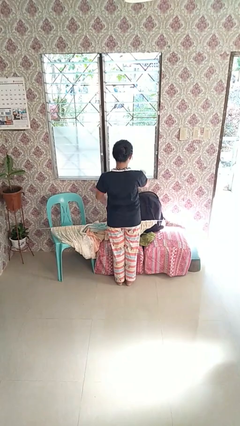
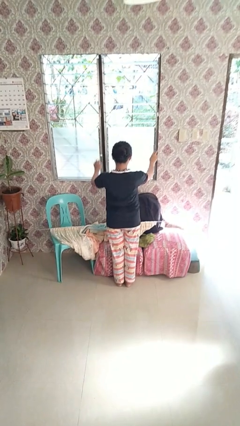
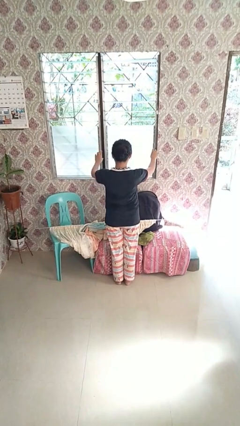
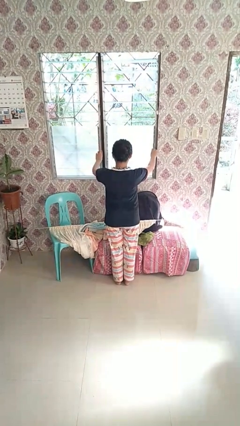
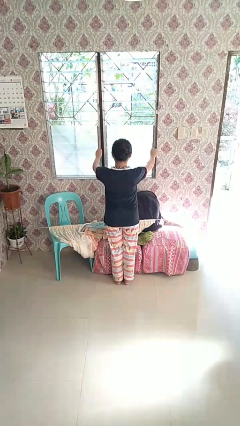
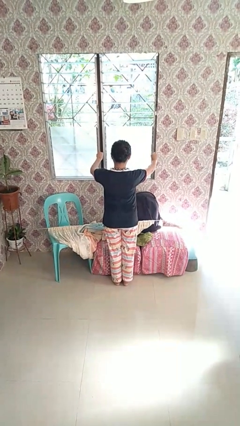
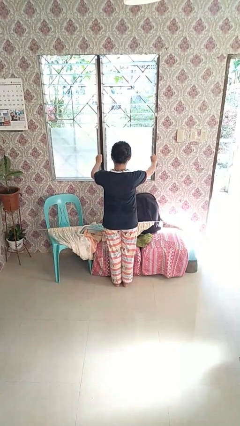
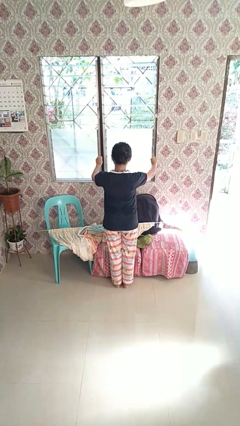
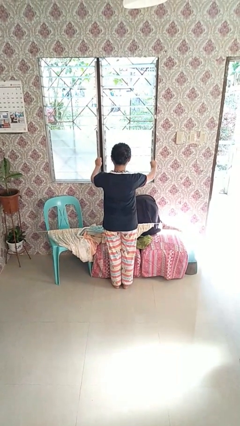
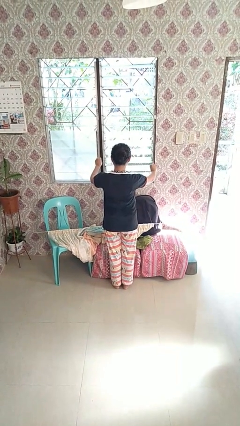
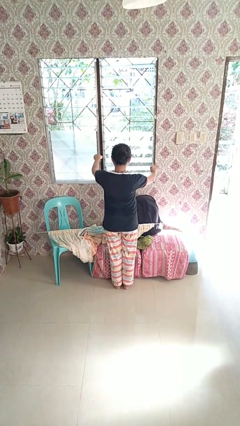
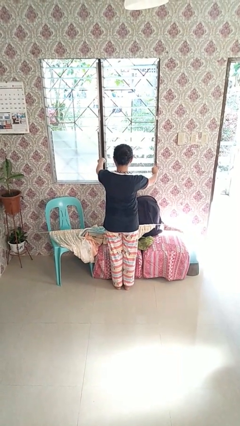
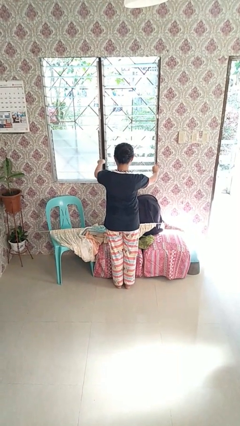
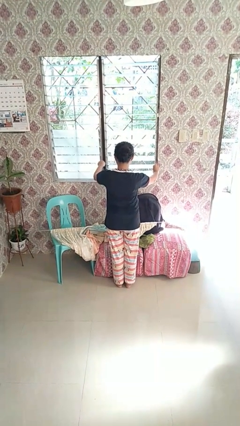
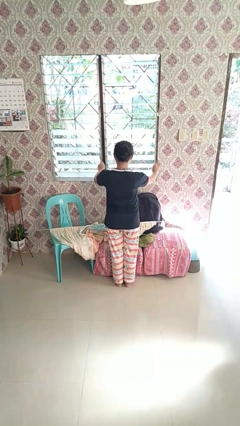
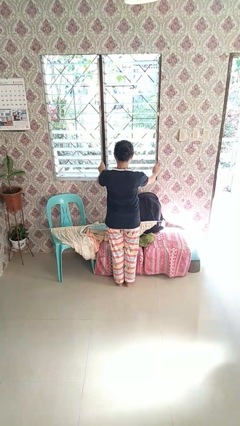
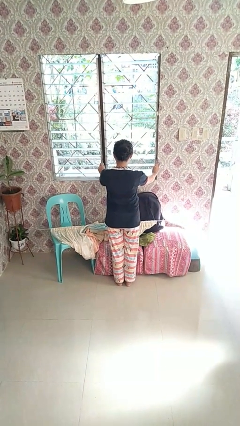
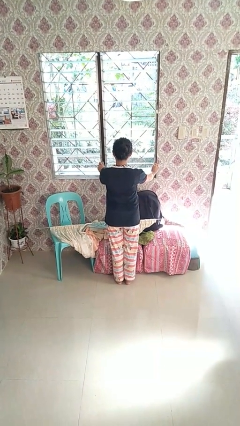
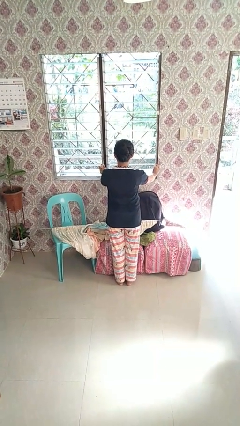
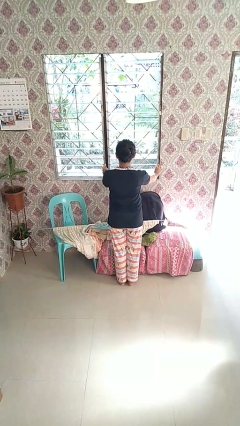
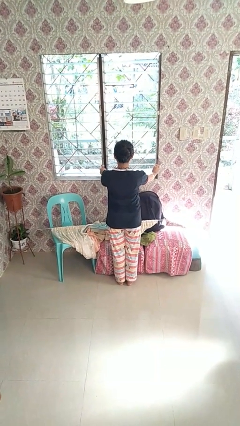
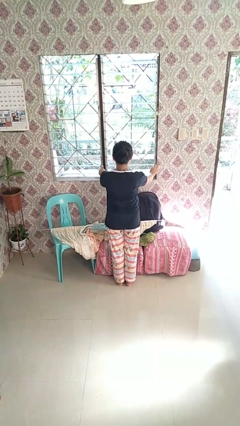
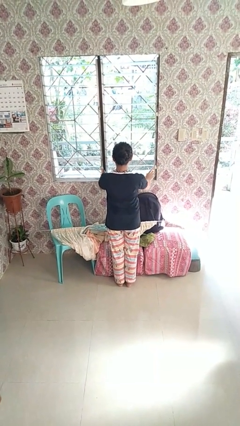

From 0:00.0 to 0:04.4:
person opens home window

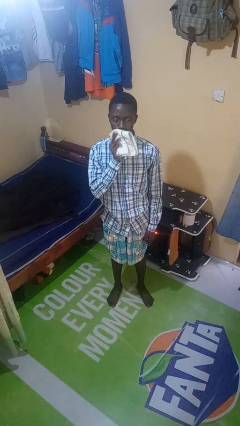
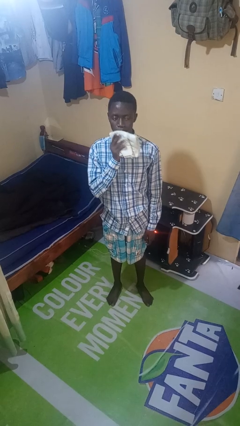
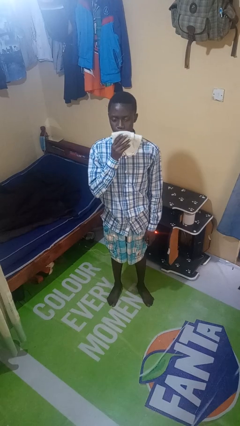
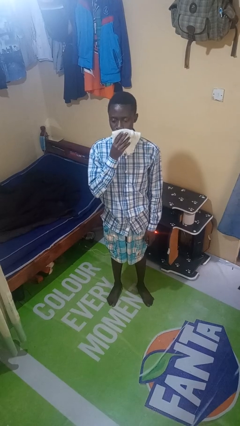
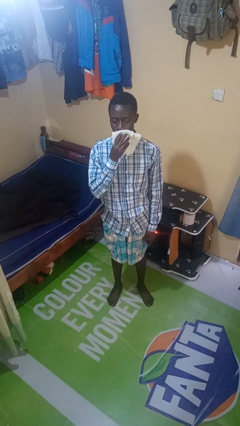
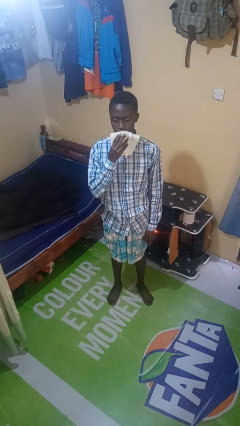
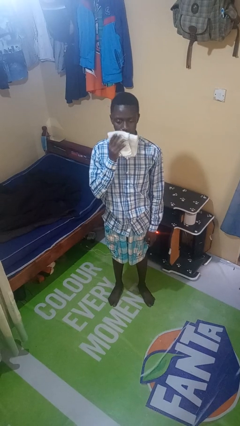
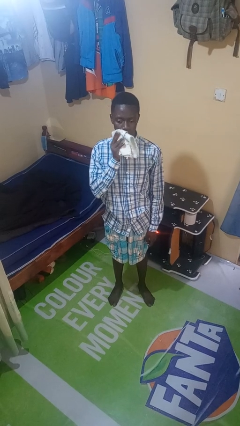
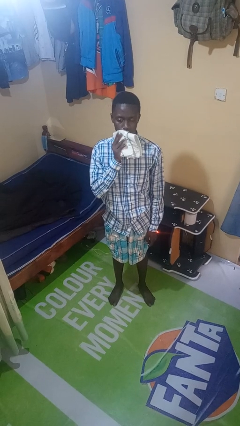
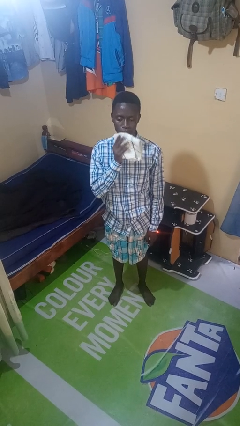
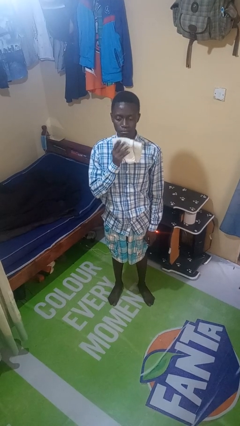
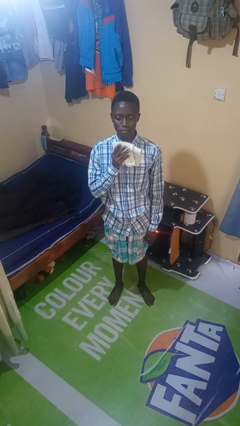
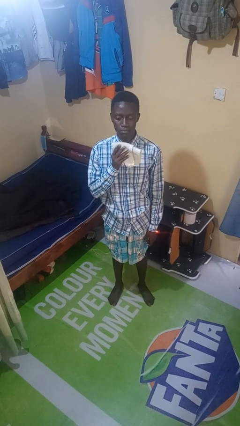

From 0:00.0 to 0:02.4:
person wipes mouth with napkin

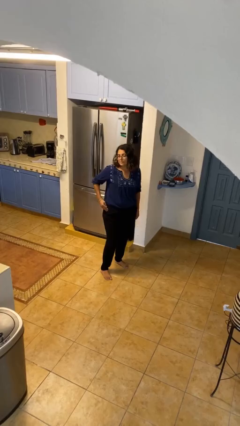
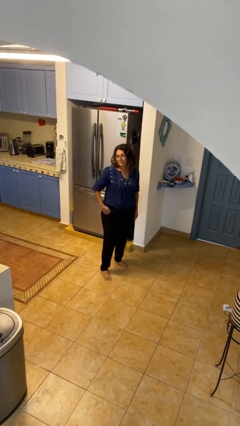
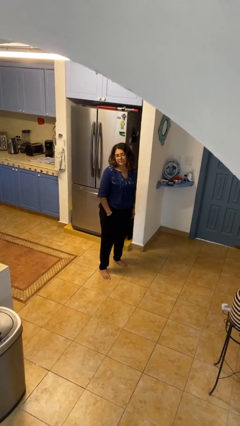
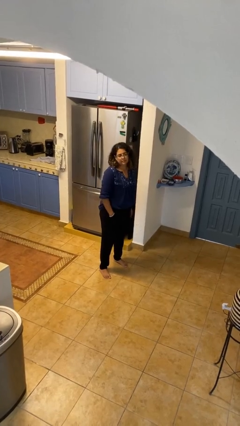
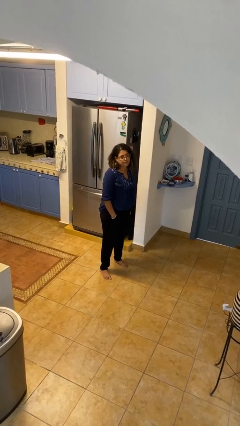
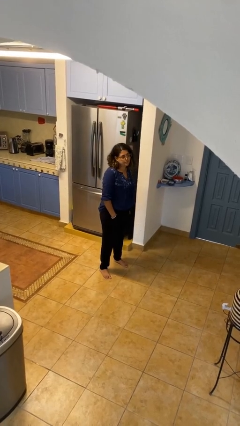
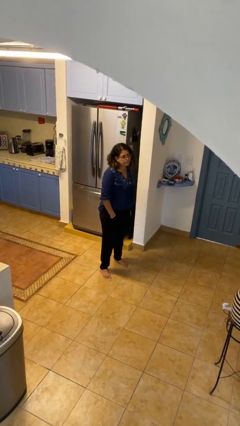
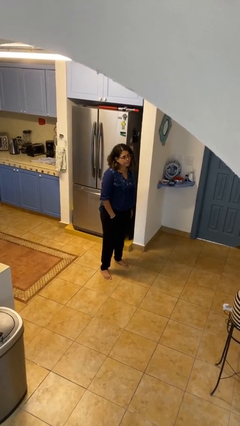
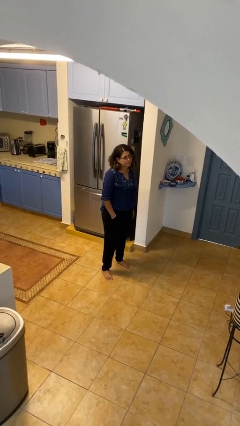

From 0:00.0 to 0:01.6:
person puts hands in back pockets

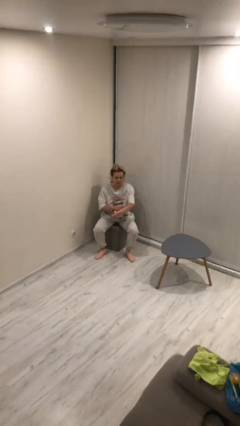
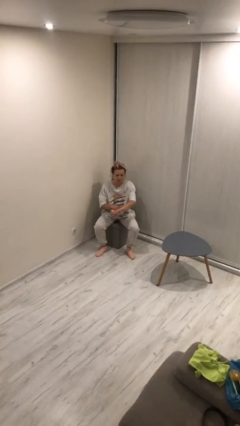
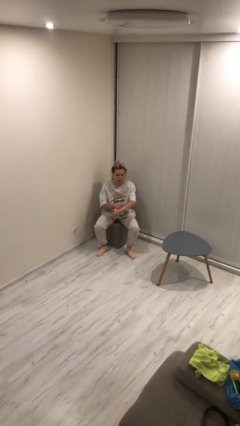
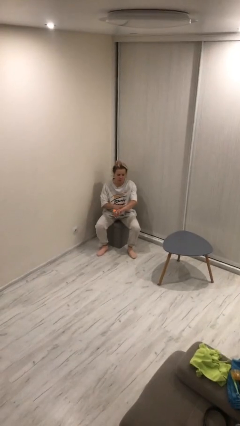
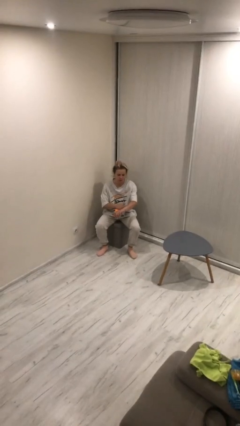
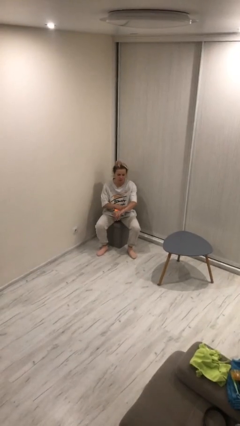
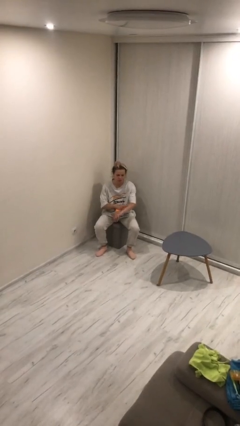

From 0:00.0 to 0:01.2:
person applies sunscreen

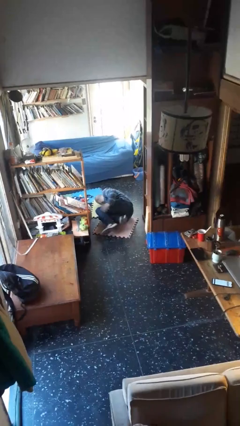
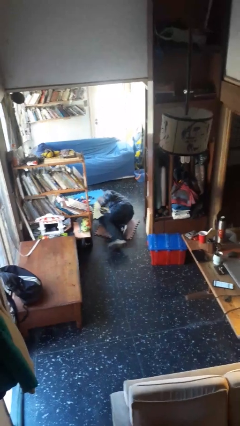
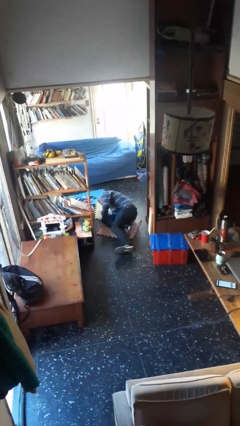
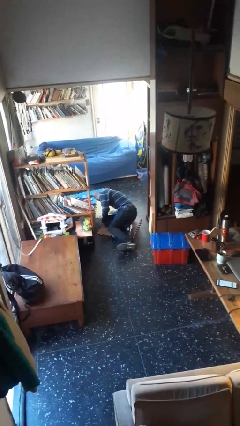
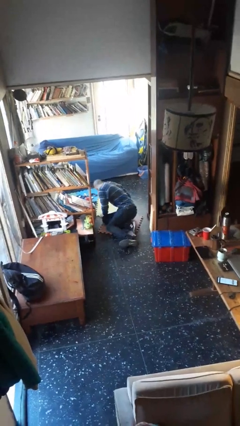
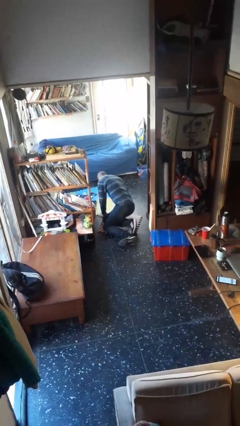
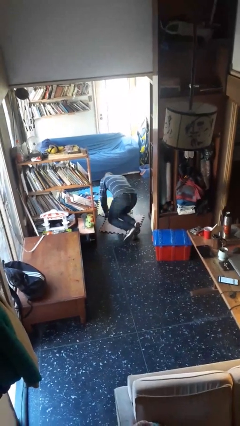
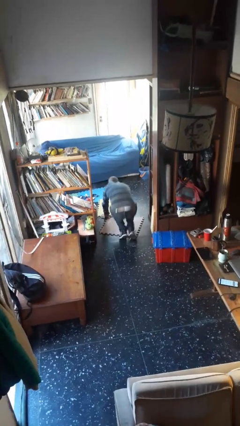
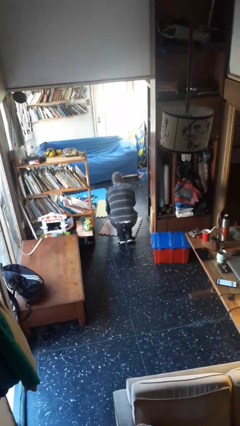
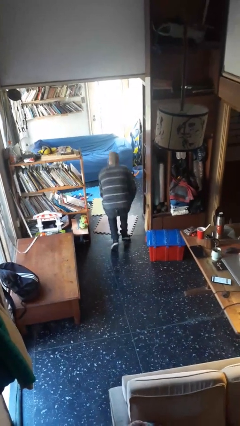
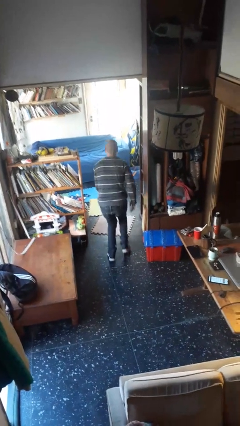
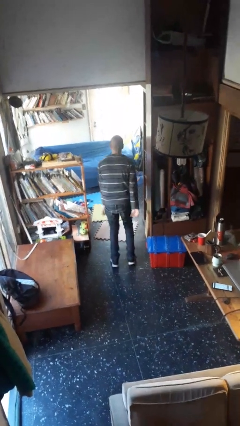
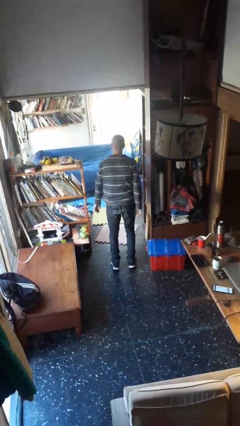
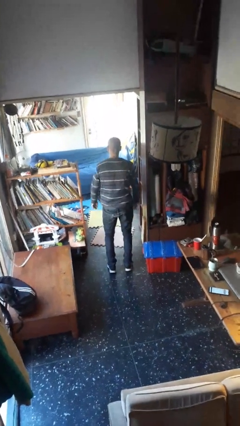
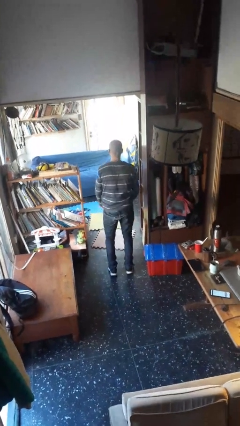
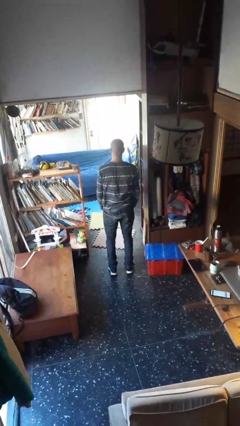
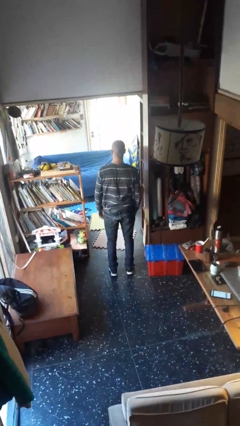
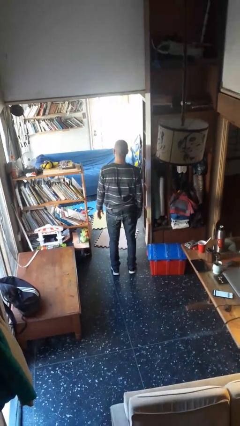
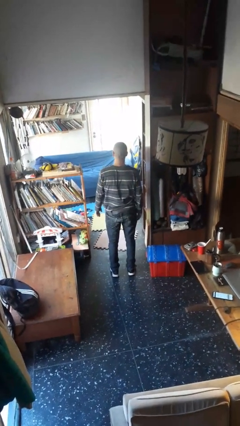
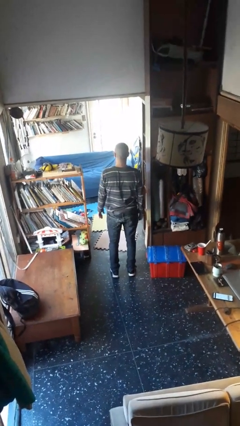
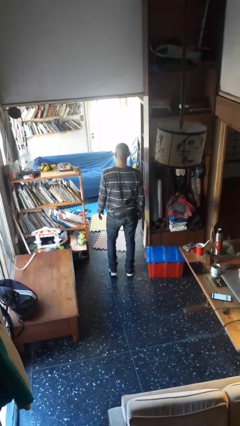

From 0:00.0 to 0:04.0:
person stands up from floor

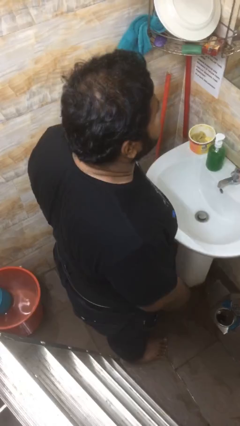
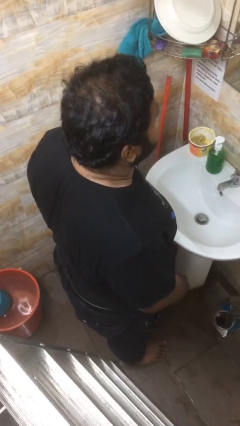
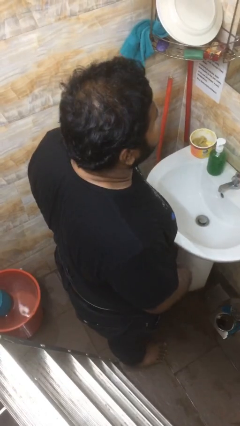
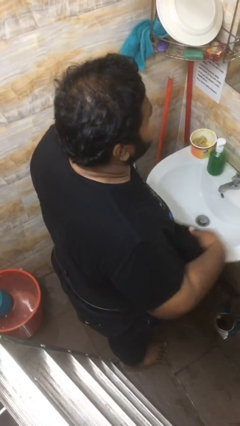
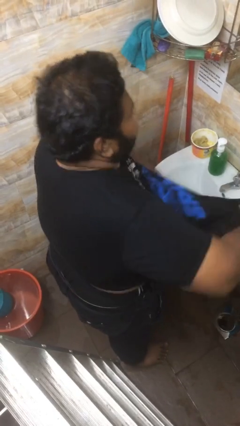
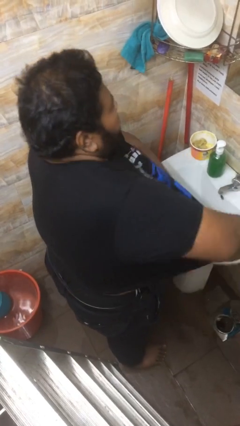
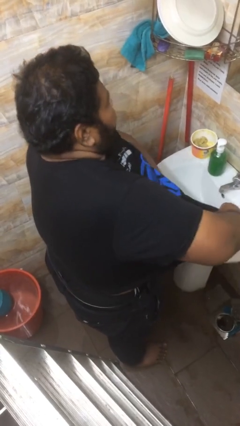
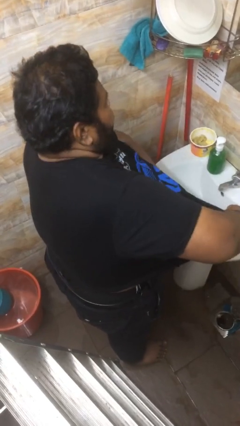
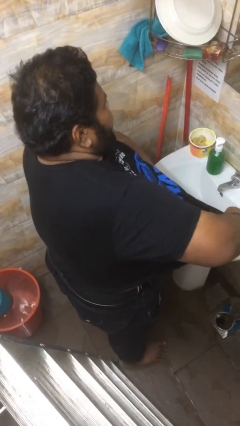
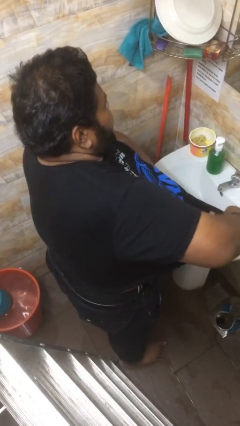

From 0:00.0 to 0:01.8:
person applies deodorant

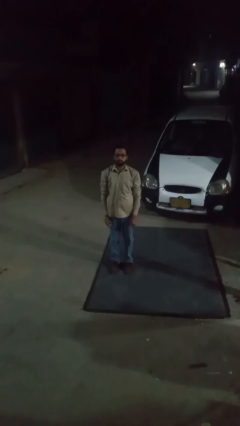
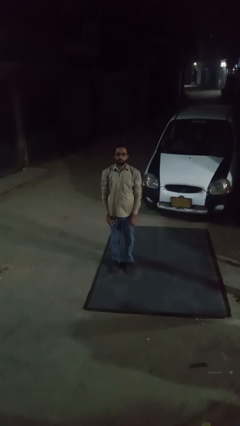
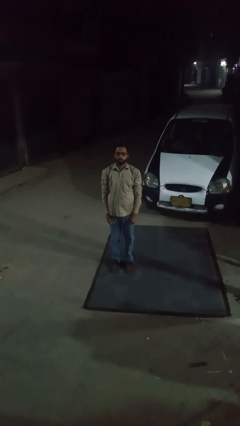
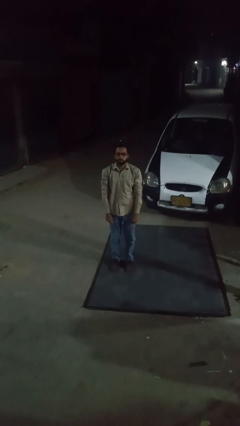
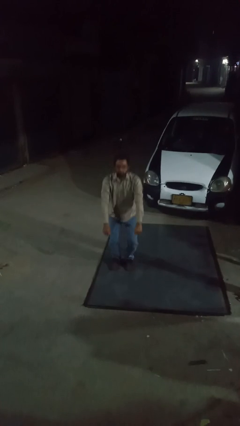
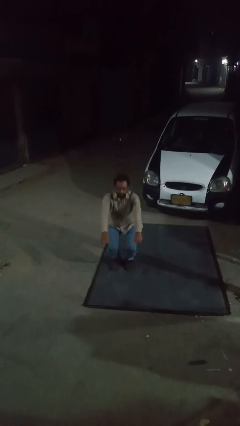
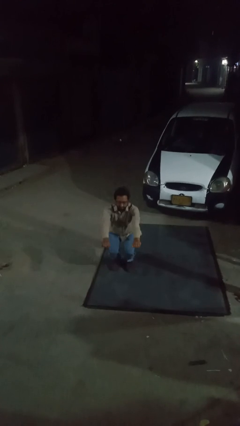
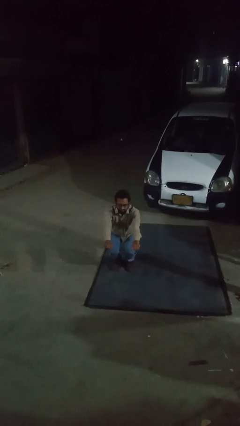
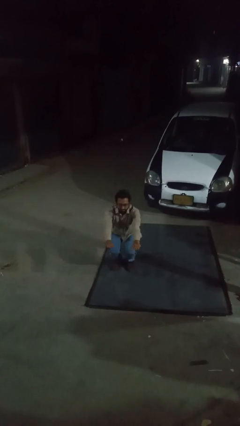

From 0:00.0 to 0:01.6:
person squats
